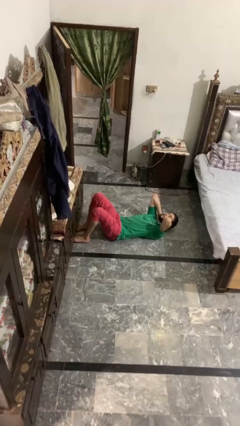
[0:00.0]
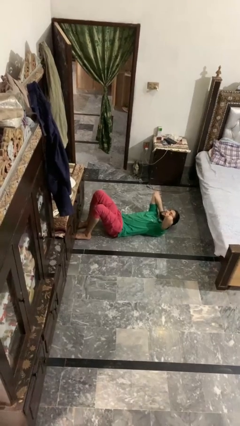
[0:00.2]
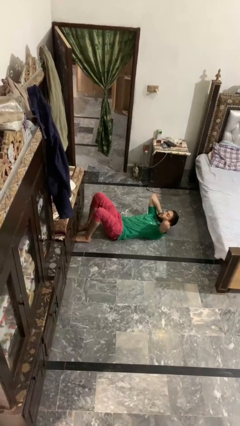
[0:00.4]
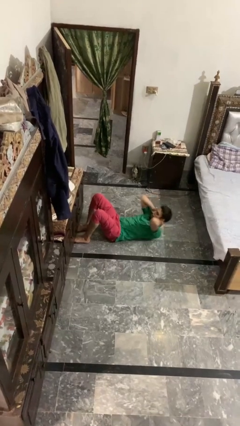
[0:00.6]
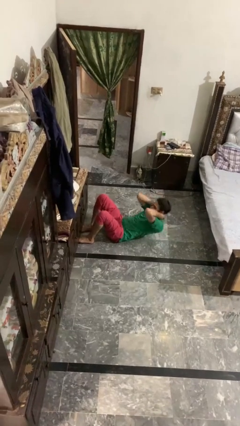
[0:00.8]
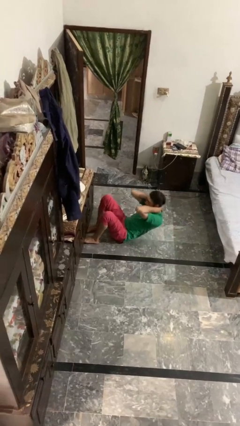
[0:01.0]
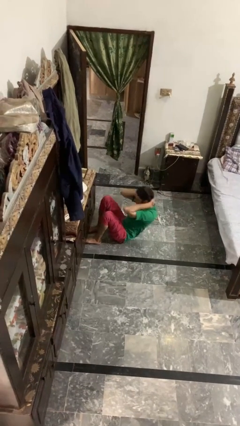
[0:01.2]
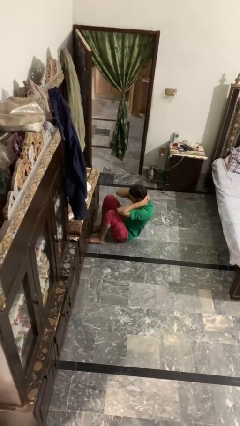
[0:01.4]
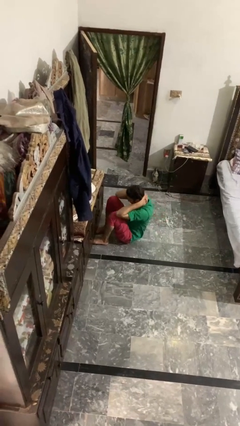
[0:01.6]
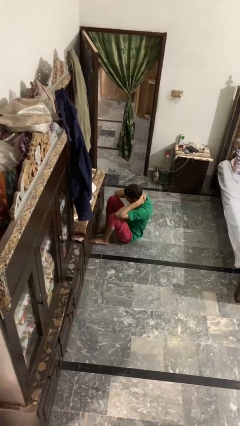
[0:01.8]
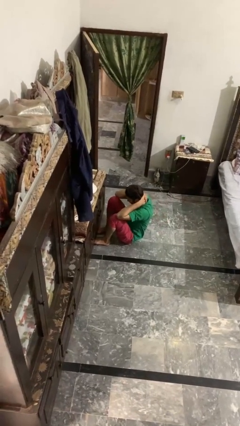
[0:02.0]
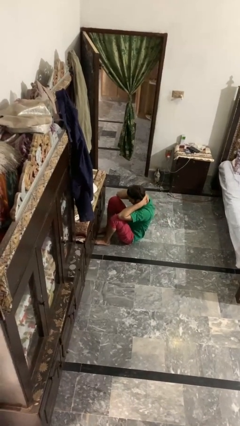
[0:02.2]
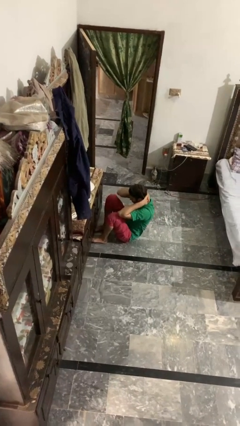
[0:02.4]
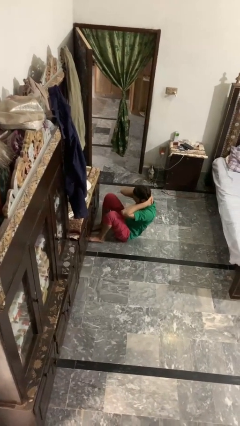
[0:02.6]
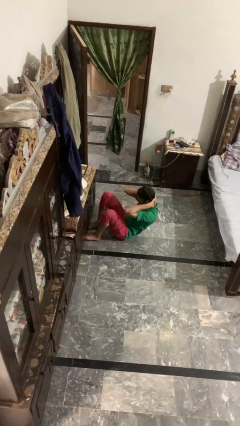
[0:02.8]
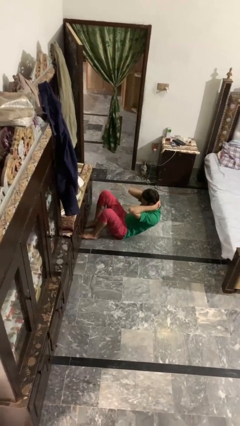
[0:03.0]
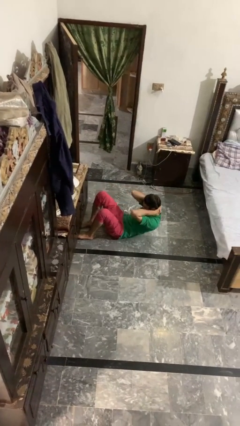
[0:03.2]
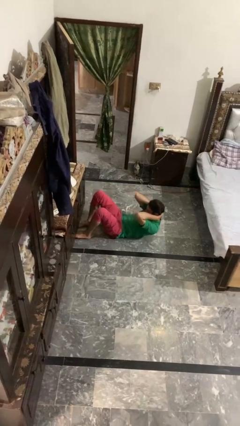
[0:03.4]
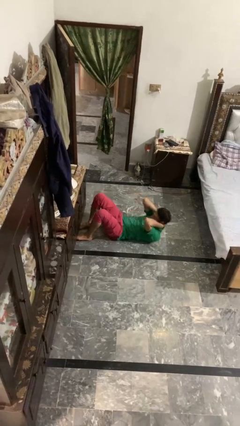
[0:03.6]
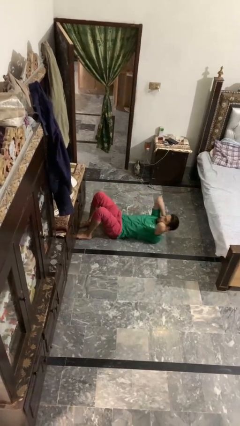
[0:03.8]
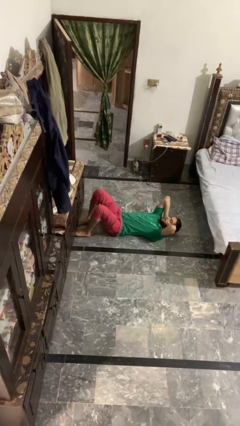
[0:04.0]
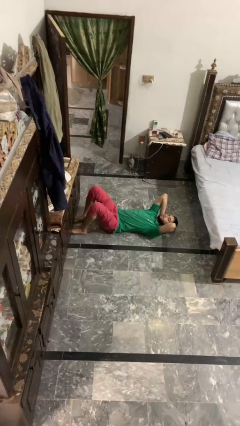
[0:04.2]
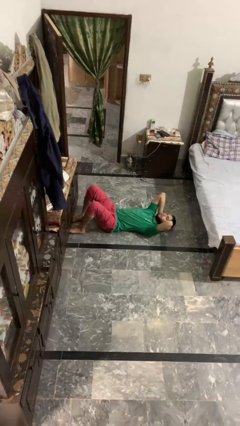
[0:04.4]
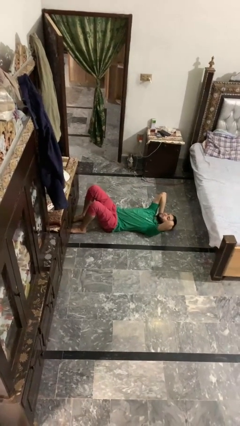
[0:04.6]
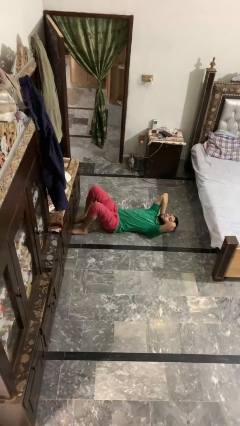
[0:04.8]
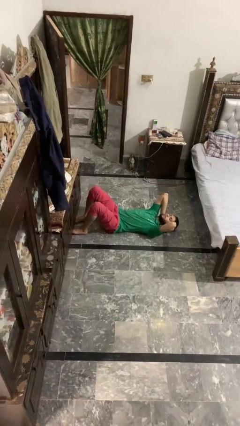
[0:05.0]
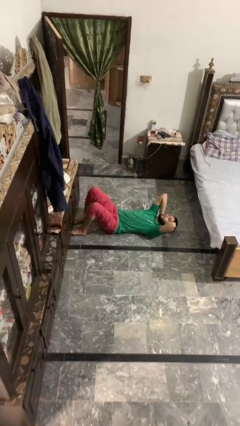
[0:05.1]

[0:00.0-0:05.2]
person exercises with situp

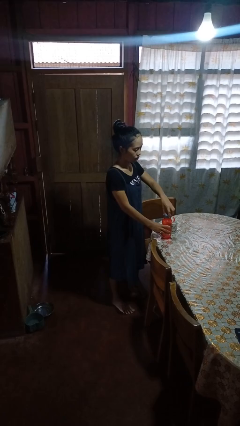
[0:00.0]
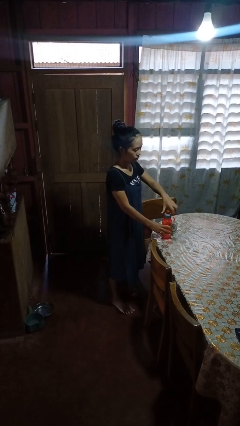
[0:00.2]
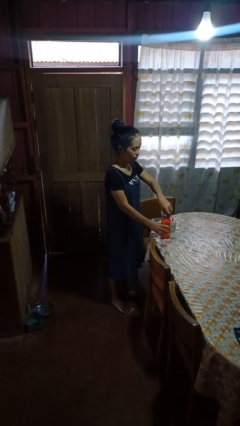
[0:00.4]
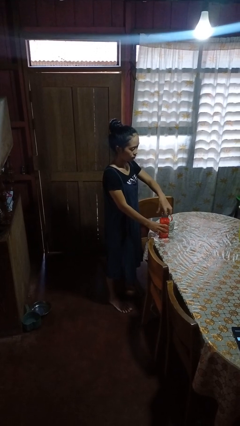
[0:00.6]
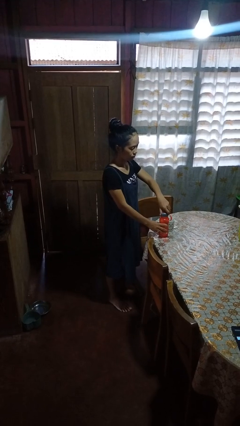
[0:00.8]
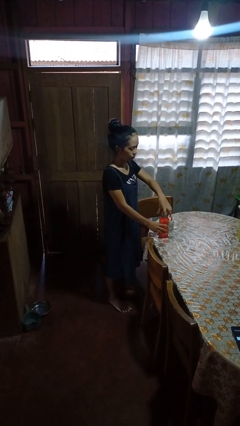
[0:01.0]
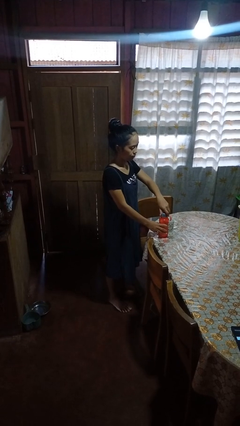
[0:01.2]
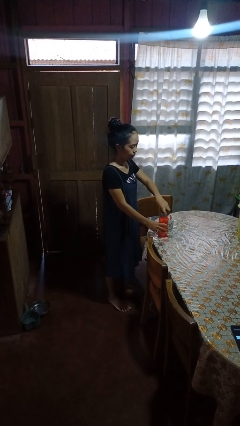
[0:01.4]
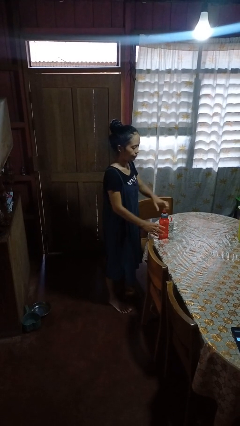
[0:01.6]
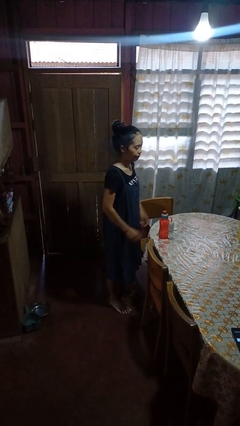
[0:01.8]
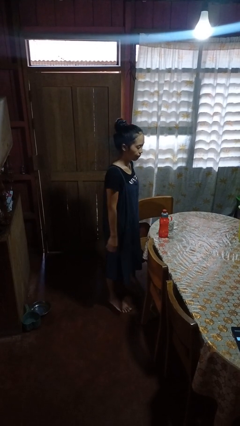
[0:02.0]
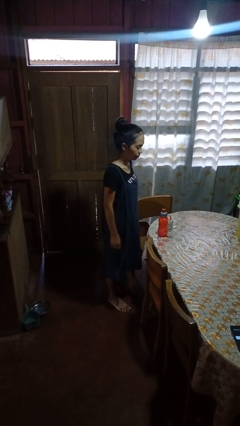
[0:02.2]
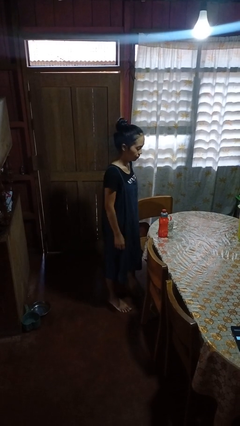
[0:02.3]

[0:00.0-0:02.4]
person screws lid to bottle

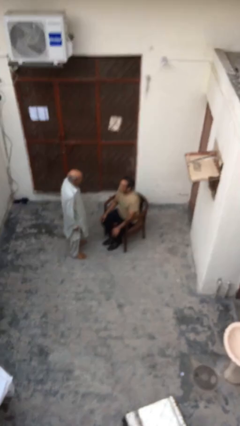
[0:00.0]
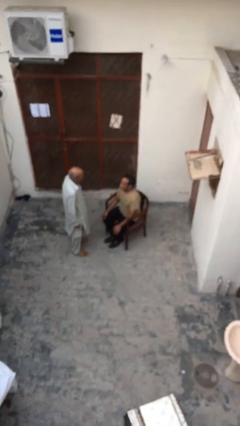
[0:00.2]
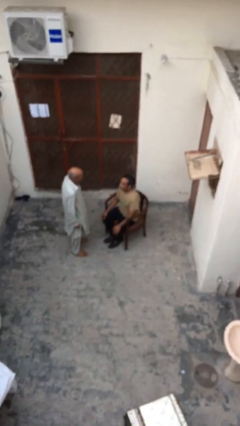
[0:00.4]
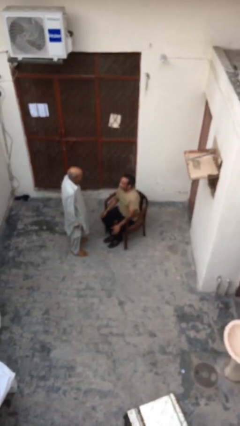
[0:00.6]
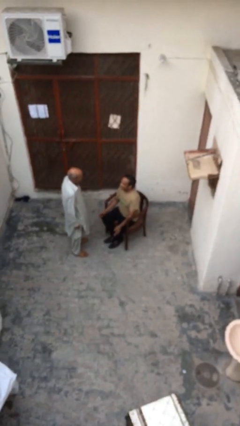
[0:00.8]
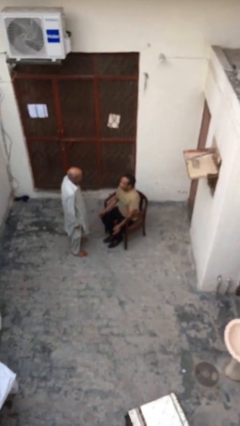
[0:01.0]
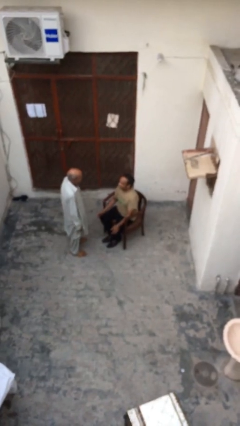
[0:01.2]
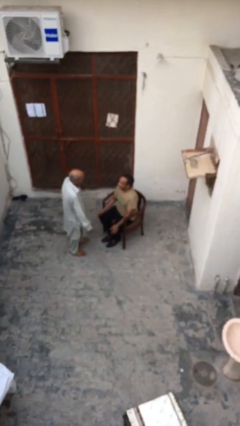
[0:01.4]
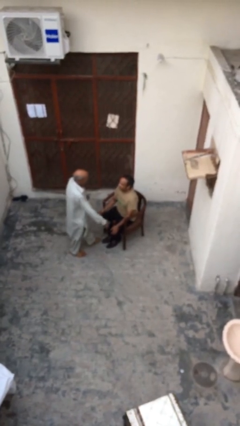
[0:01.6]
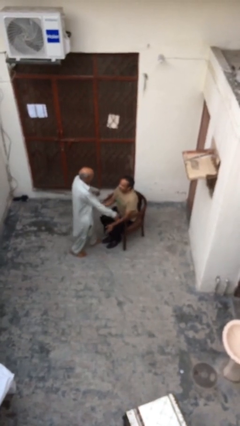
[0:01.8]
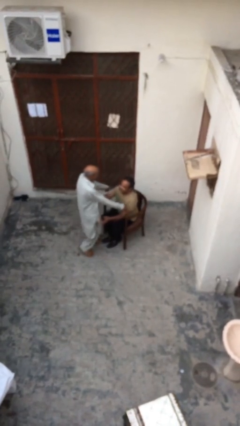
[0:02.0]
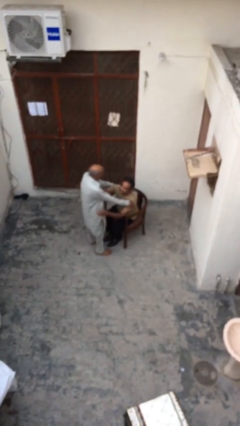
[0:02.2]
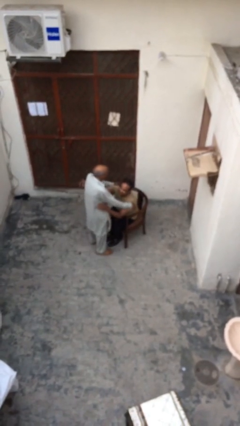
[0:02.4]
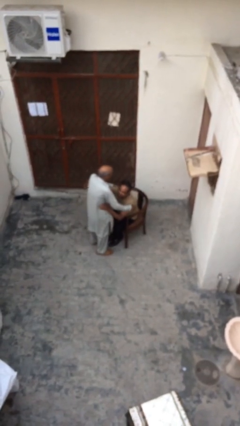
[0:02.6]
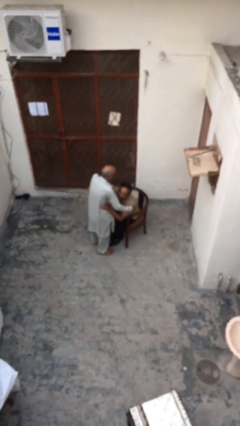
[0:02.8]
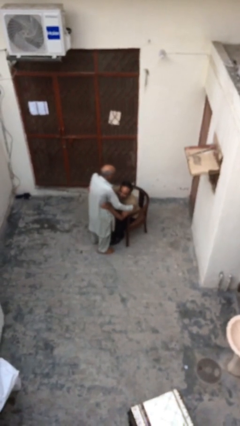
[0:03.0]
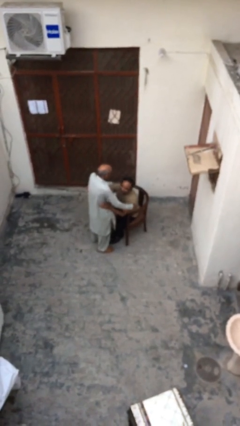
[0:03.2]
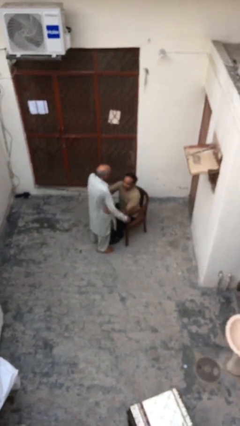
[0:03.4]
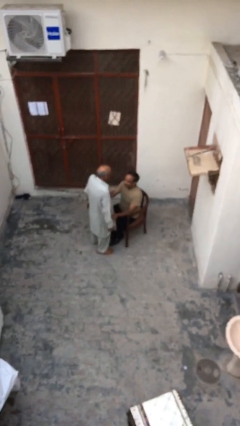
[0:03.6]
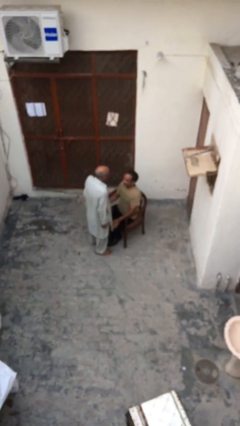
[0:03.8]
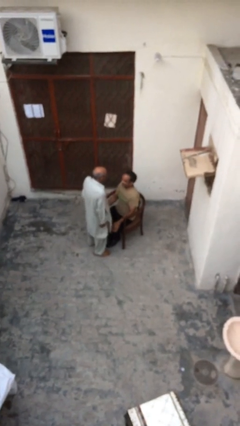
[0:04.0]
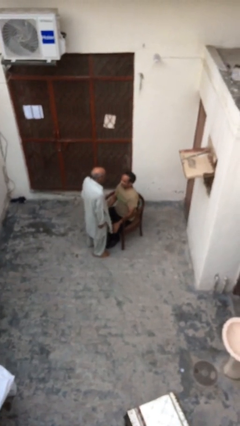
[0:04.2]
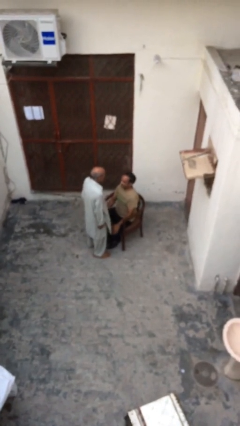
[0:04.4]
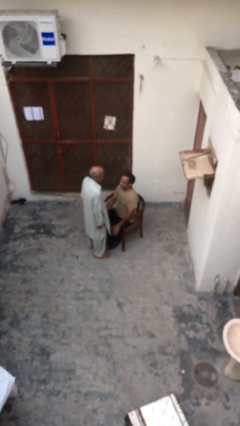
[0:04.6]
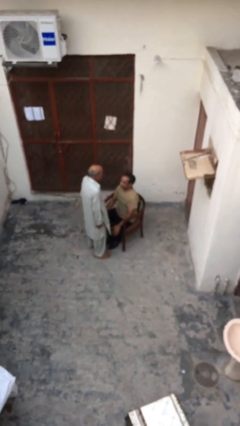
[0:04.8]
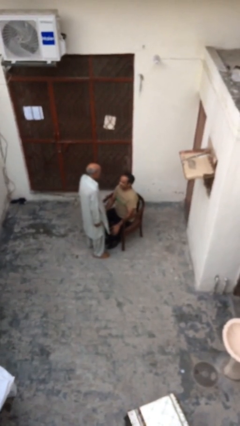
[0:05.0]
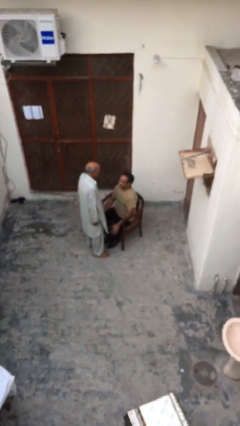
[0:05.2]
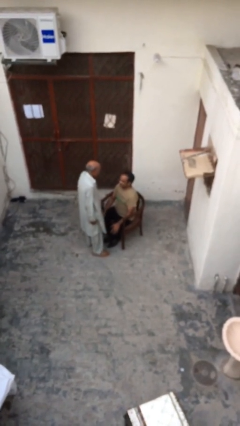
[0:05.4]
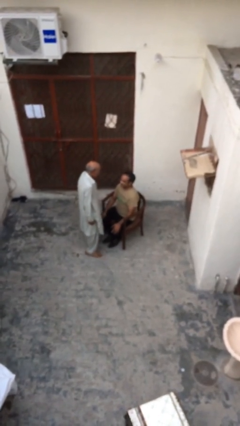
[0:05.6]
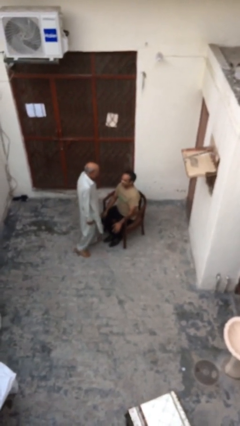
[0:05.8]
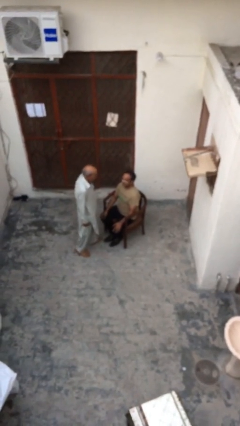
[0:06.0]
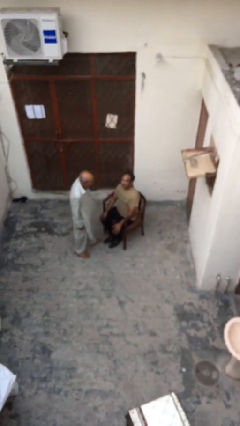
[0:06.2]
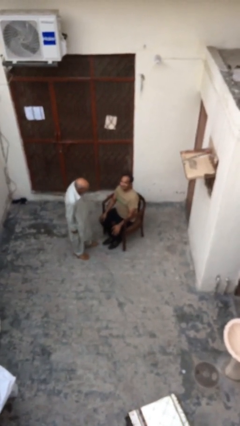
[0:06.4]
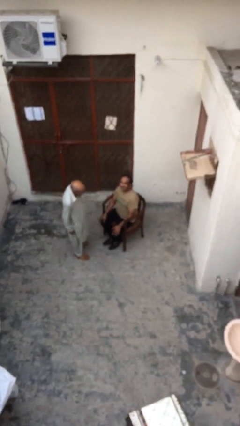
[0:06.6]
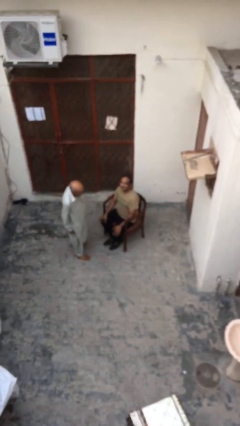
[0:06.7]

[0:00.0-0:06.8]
person embraces person

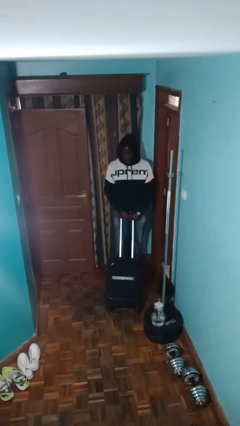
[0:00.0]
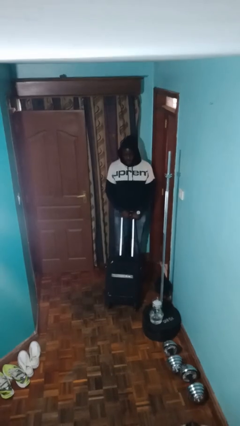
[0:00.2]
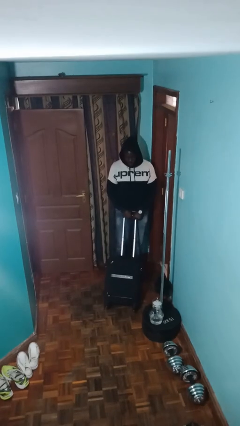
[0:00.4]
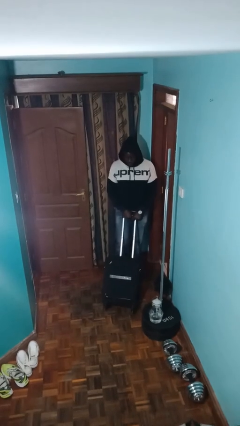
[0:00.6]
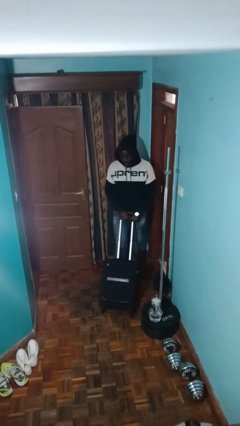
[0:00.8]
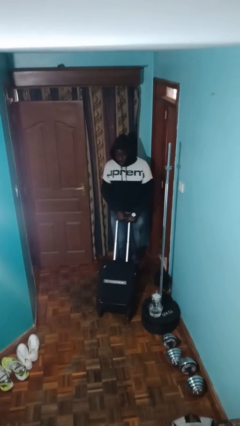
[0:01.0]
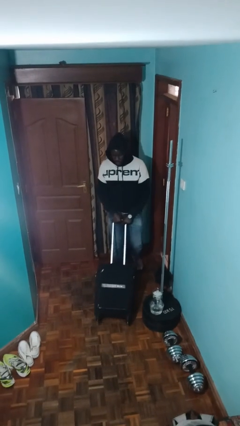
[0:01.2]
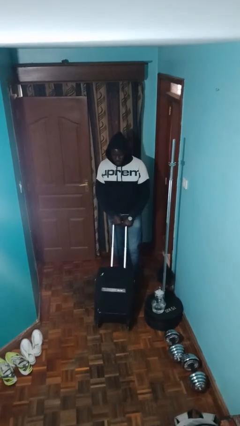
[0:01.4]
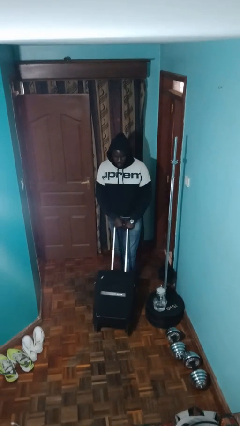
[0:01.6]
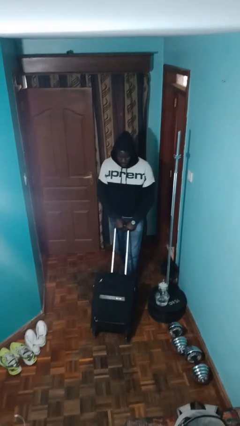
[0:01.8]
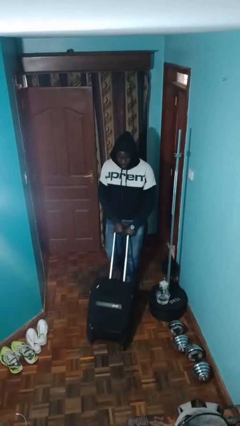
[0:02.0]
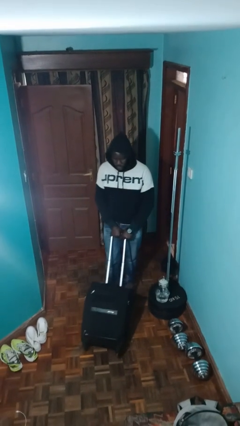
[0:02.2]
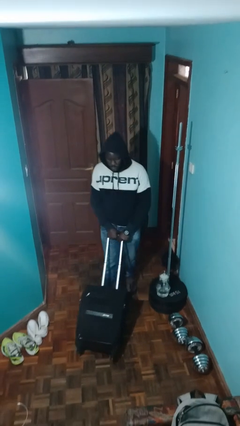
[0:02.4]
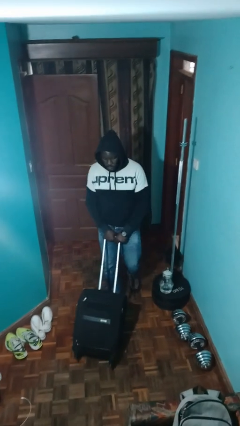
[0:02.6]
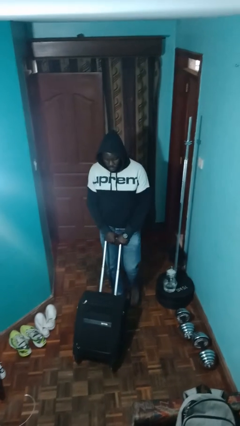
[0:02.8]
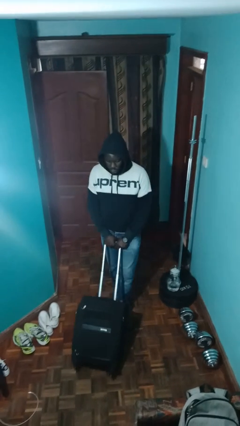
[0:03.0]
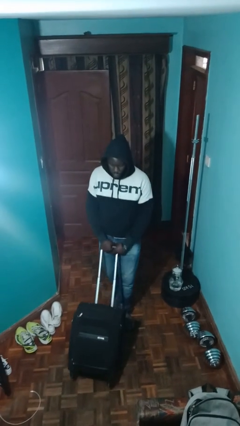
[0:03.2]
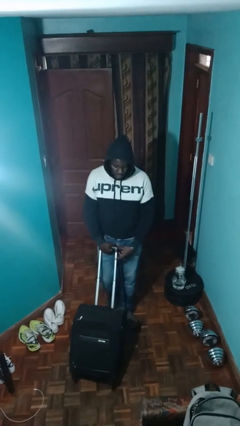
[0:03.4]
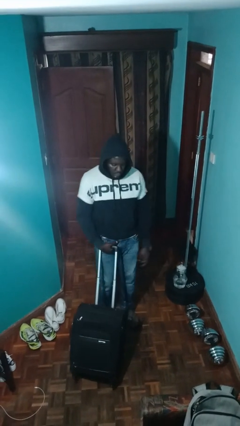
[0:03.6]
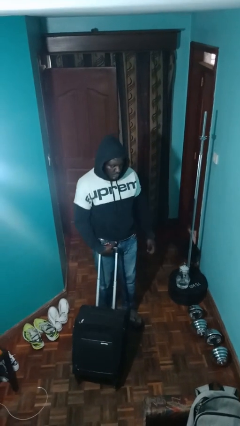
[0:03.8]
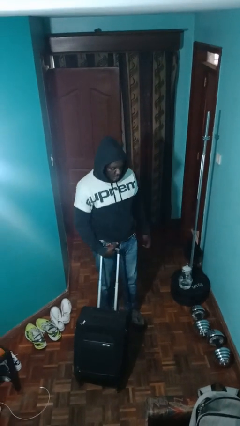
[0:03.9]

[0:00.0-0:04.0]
person pushes wheeled cart
